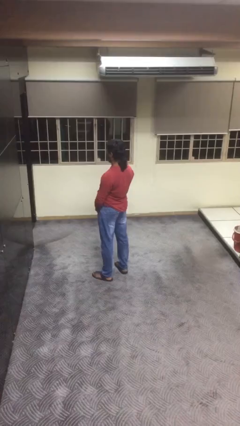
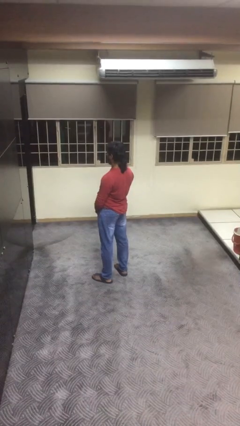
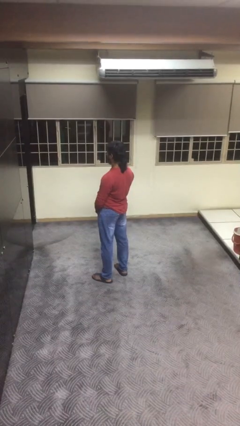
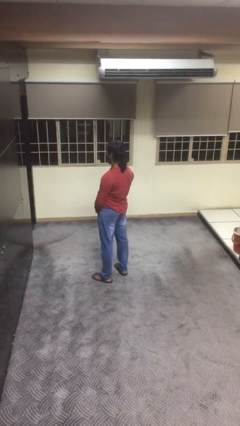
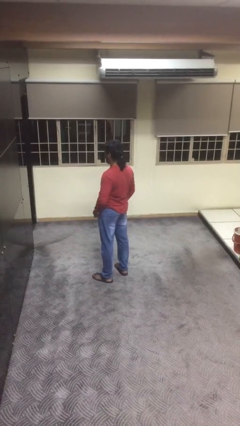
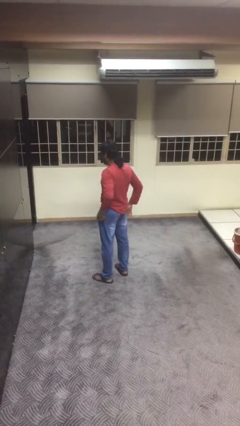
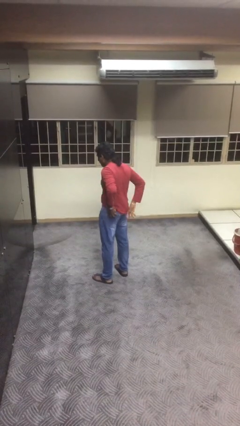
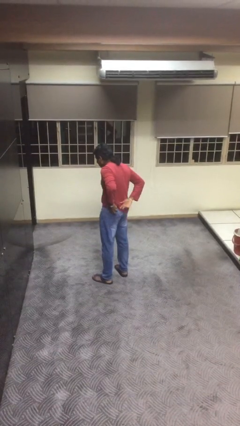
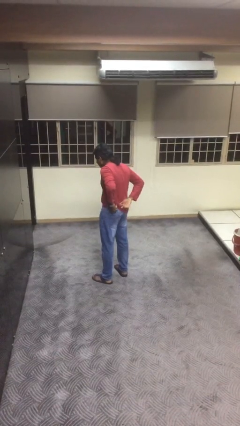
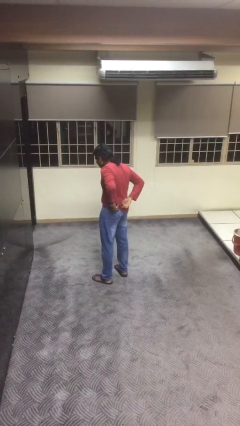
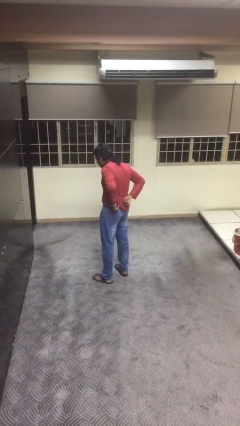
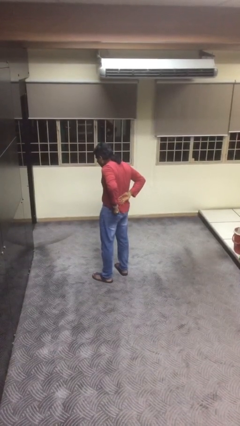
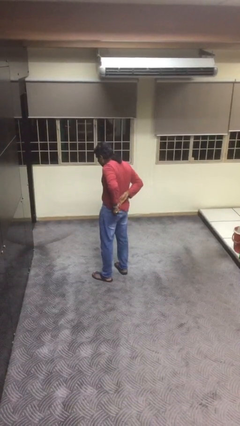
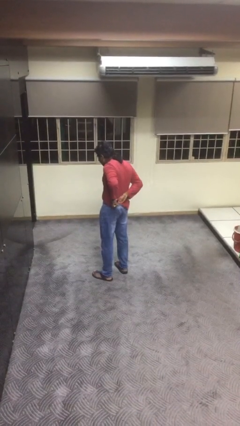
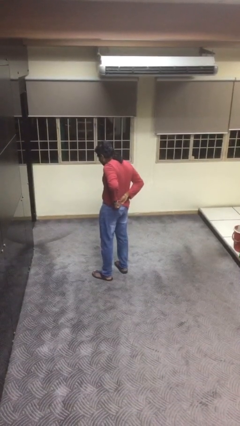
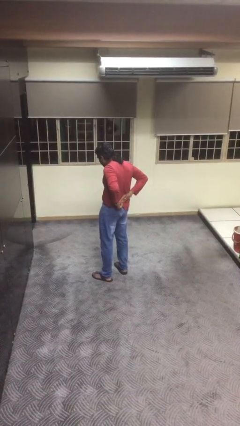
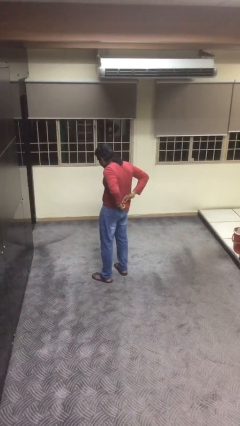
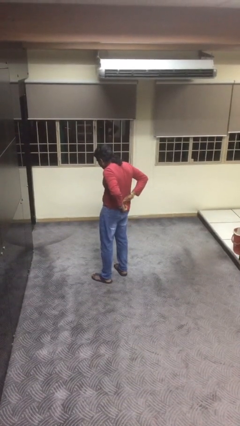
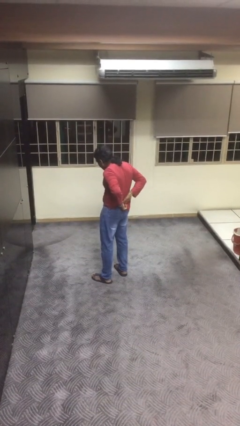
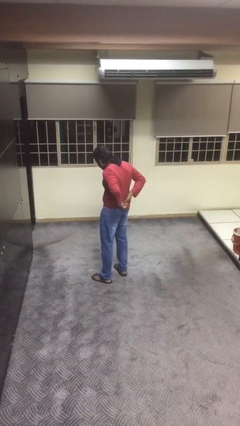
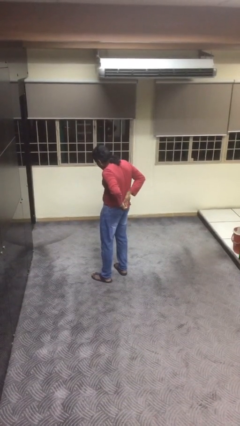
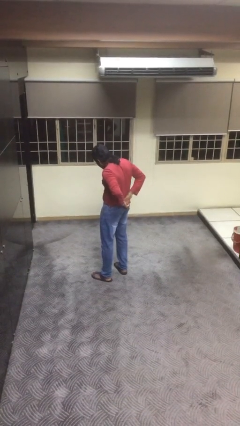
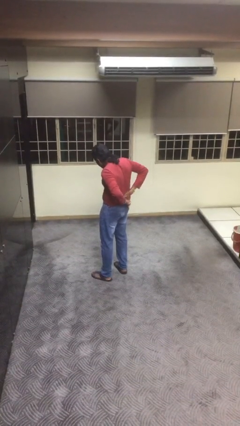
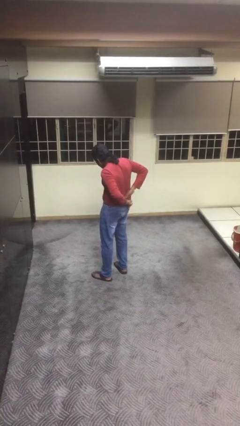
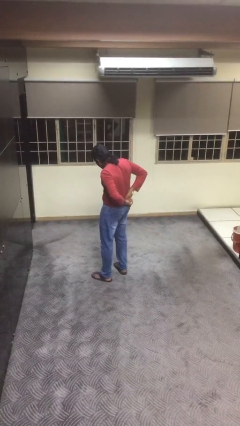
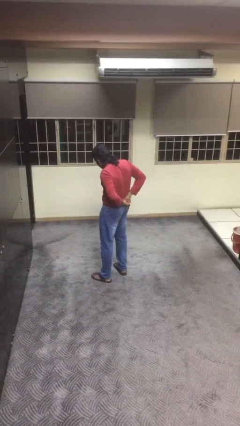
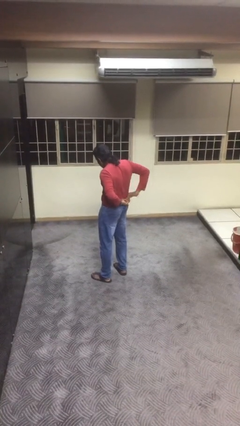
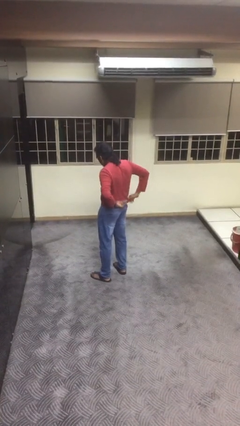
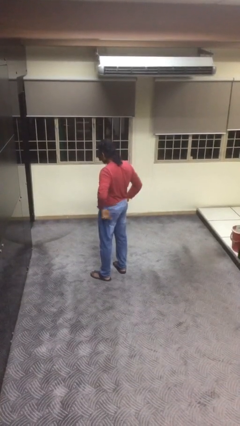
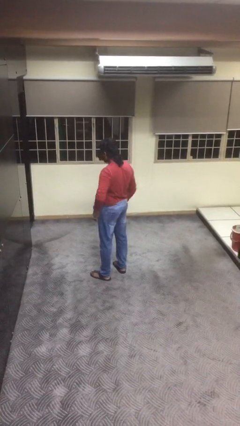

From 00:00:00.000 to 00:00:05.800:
person tucks in shirt

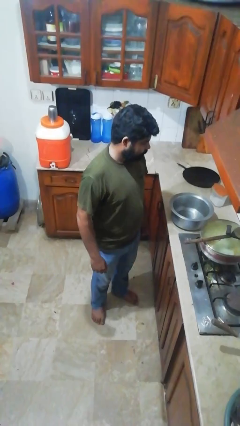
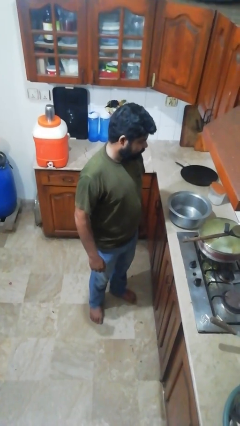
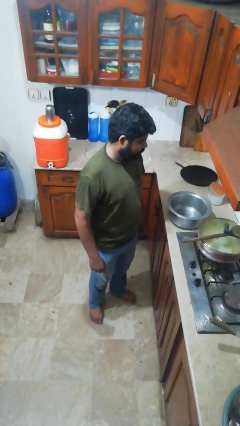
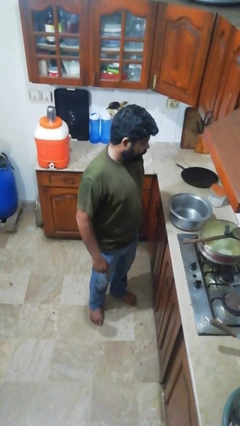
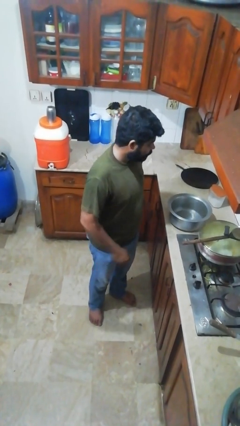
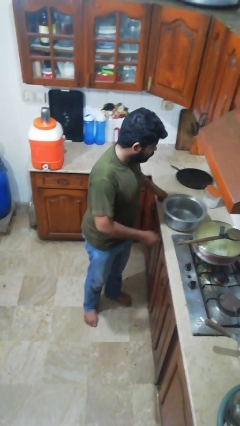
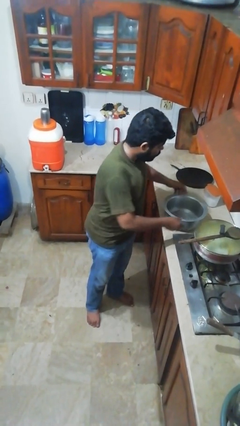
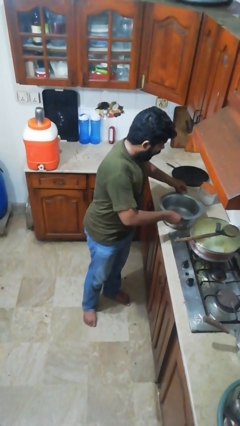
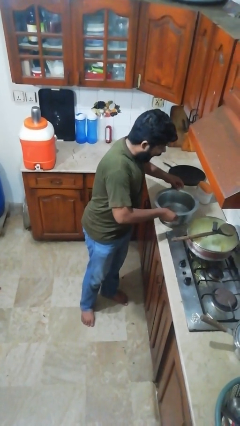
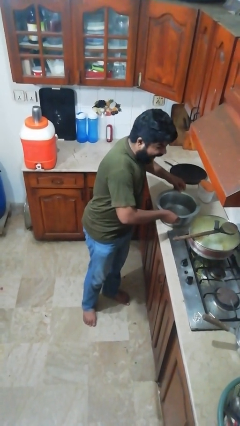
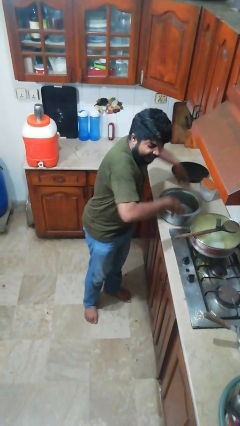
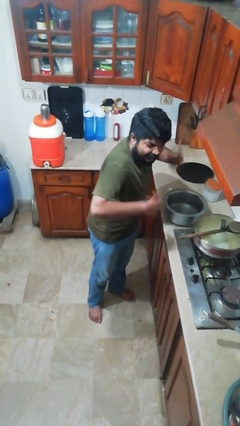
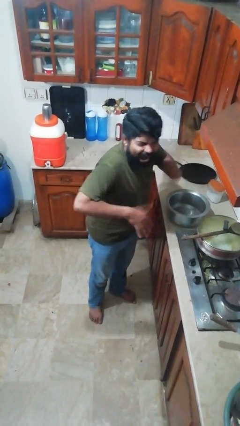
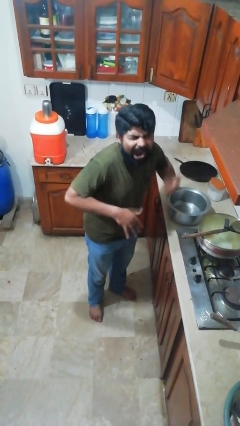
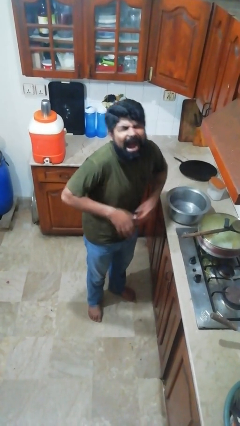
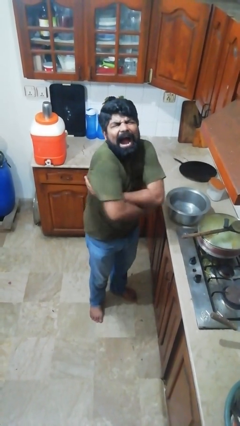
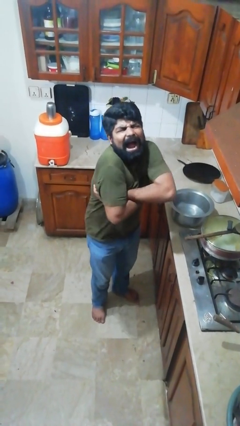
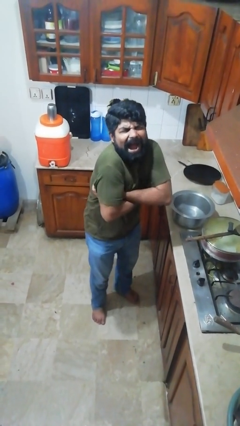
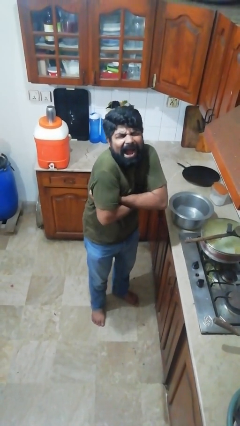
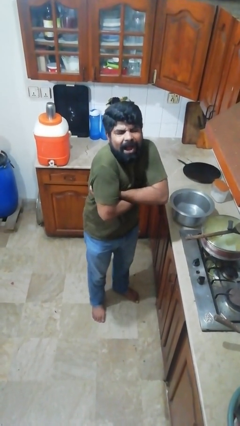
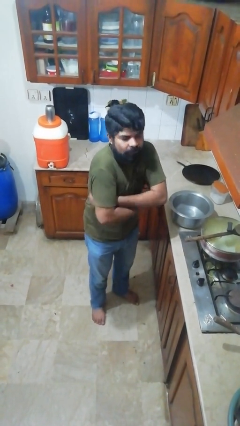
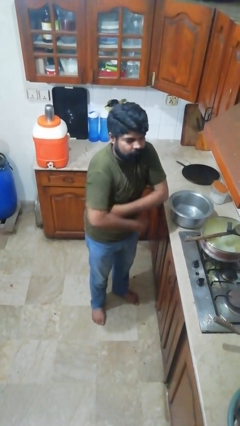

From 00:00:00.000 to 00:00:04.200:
person burns hand

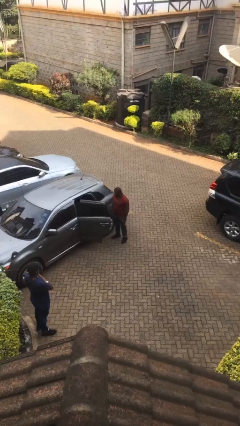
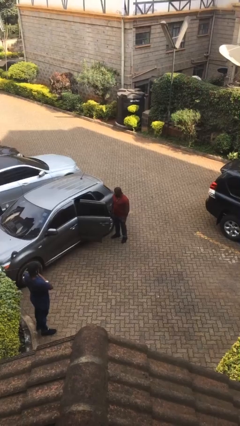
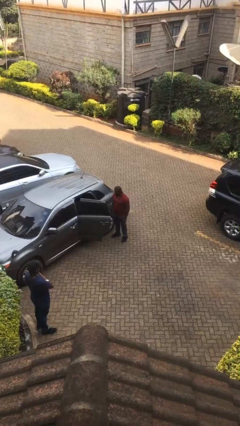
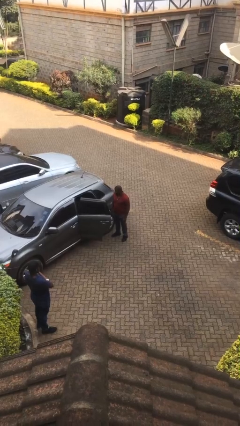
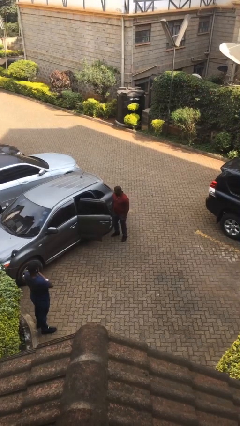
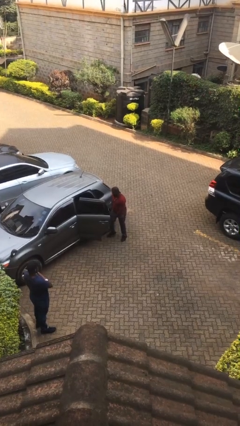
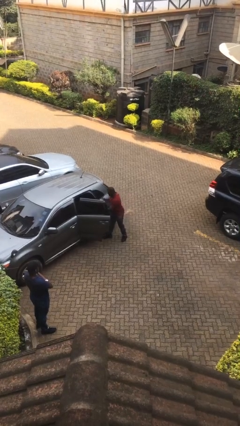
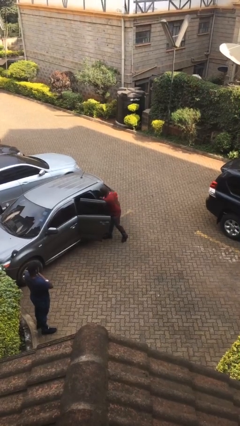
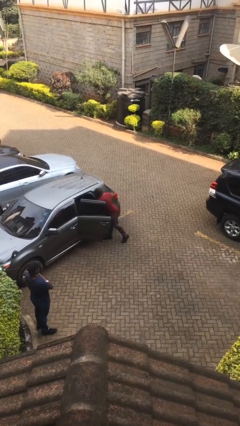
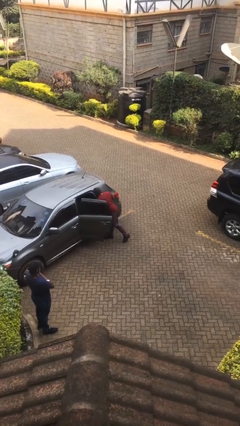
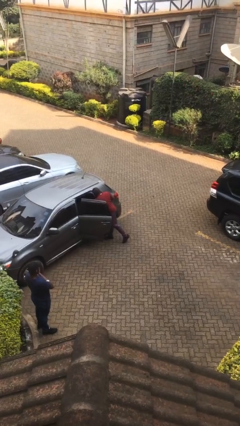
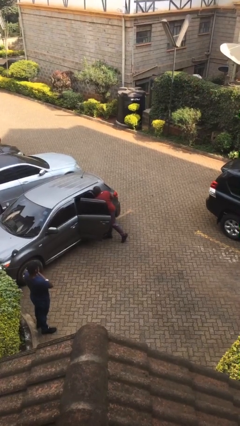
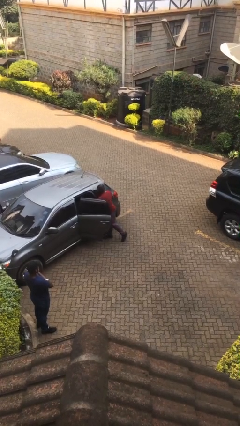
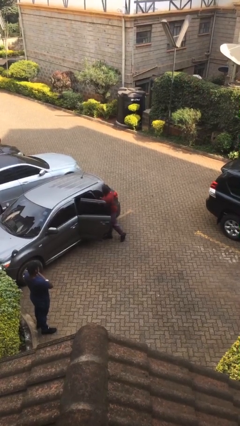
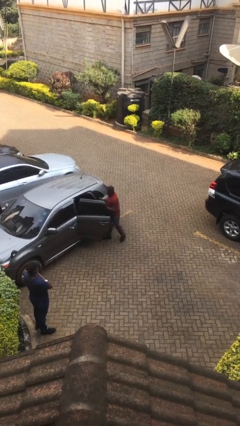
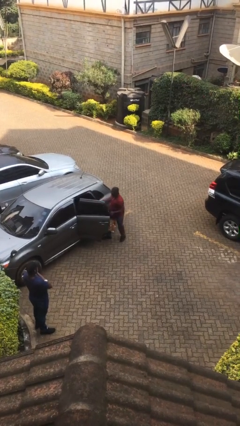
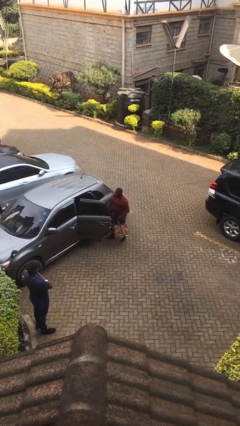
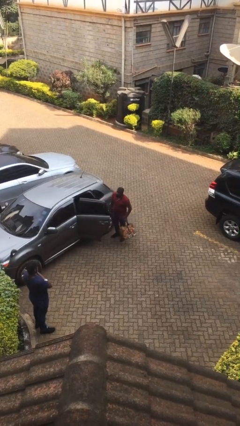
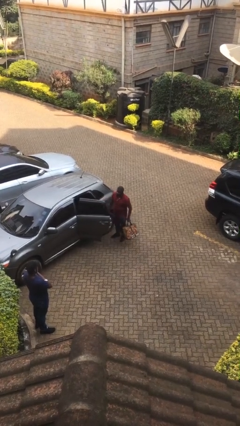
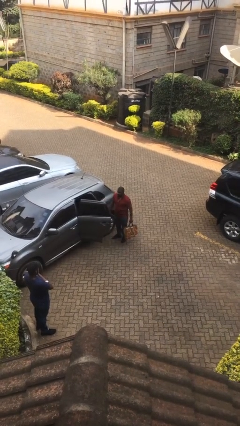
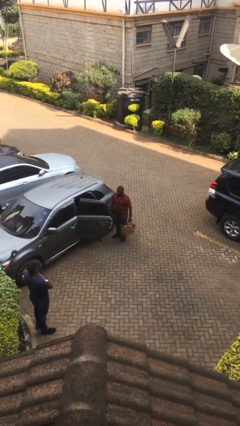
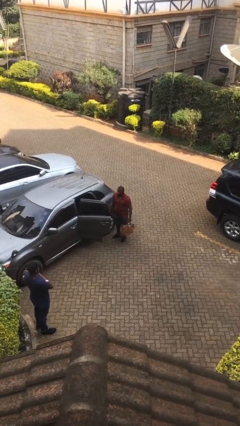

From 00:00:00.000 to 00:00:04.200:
person unloads car

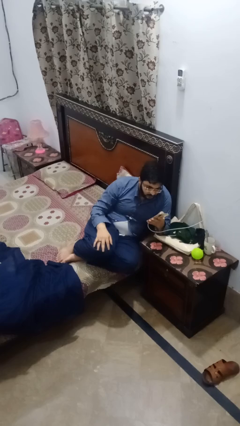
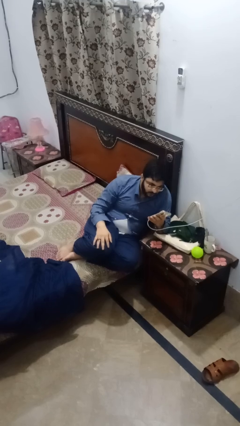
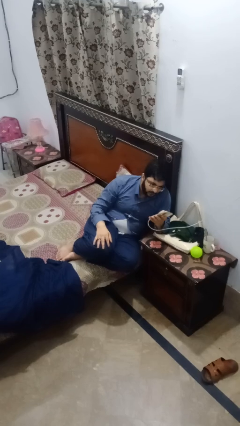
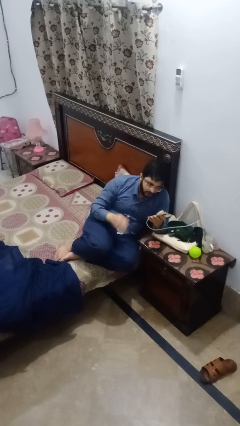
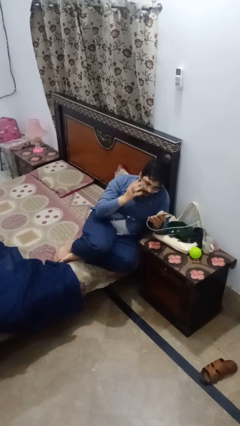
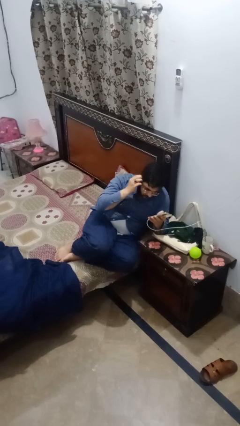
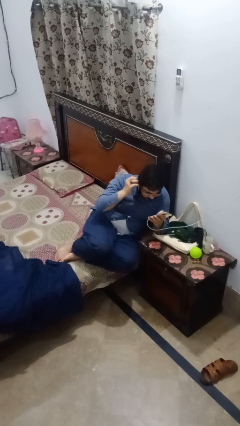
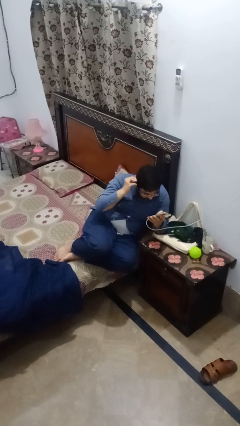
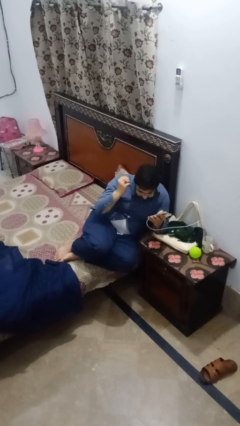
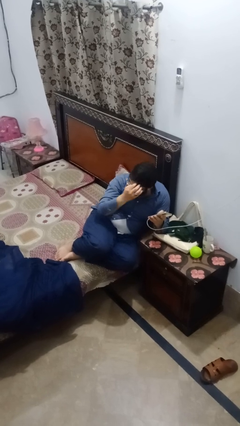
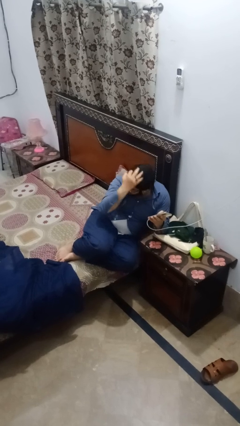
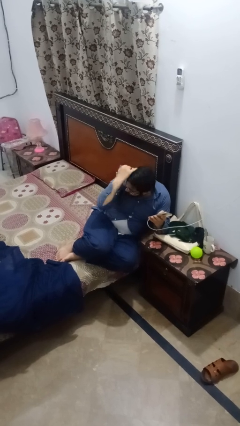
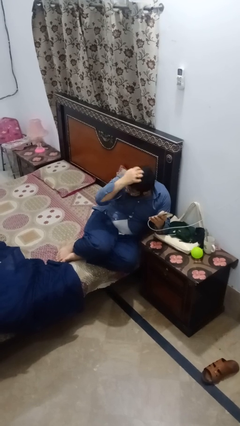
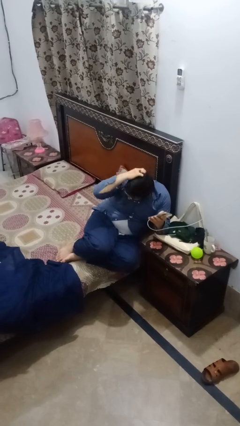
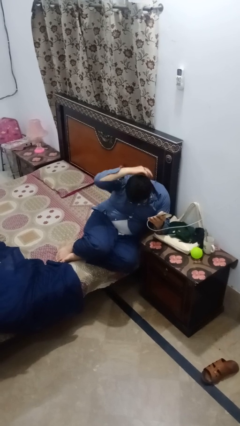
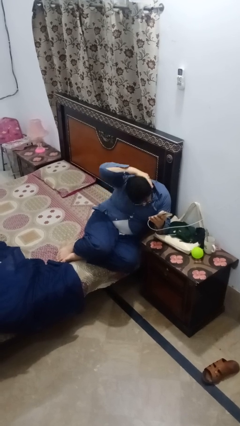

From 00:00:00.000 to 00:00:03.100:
person strokes hair

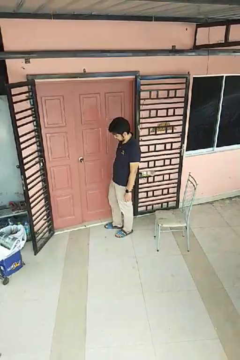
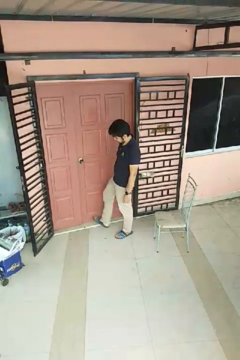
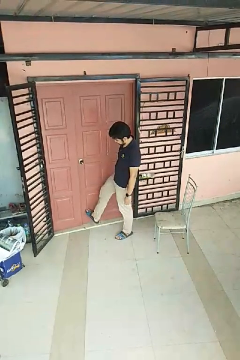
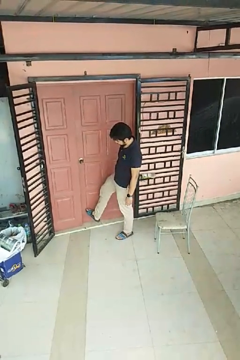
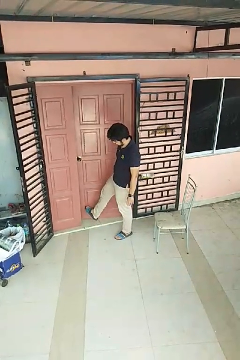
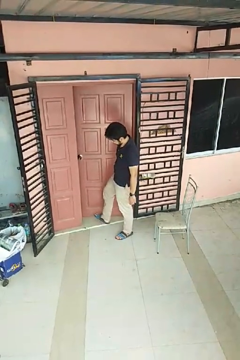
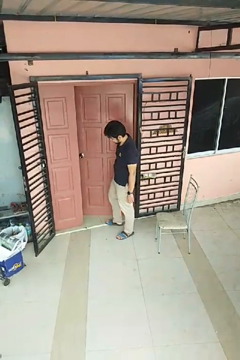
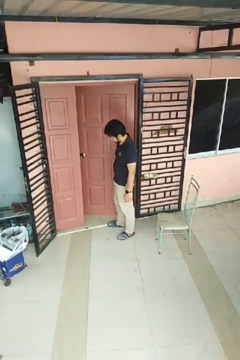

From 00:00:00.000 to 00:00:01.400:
person opens facility door
